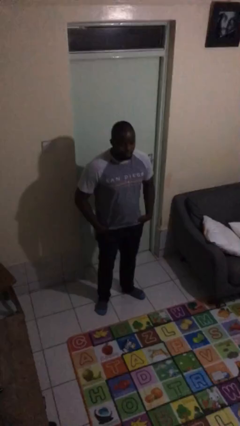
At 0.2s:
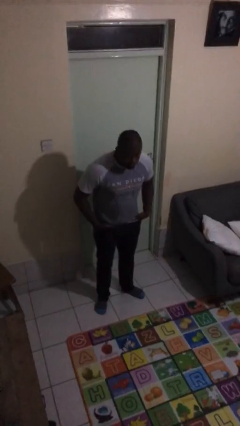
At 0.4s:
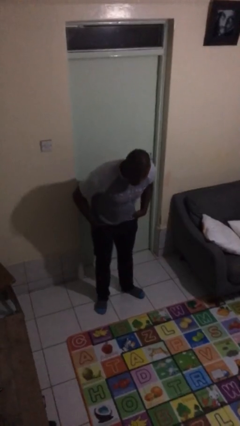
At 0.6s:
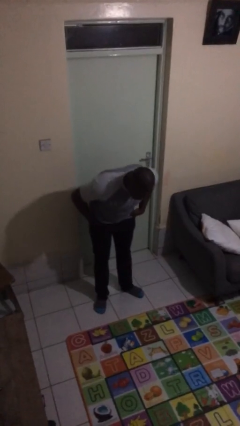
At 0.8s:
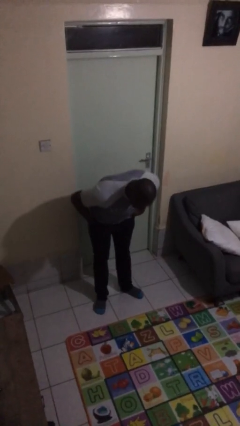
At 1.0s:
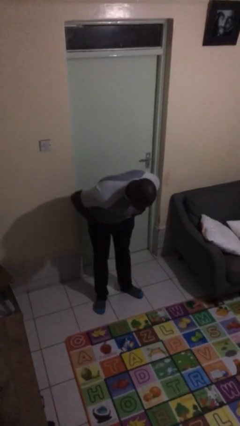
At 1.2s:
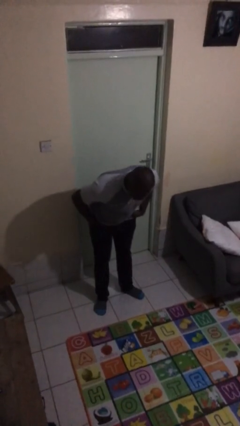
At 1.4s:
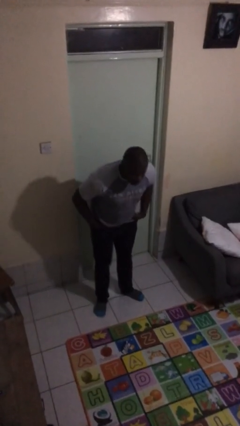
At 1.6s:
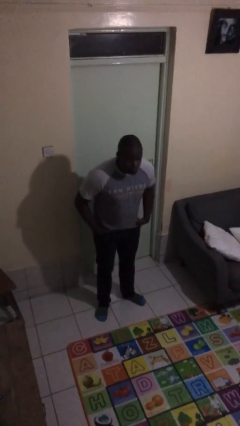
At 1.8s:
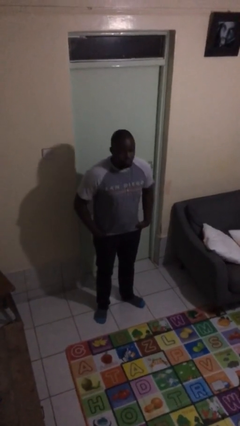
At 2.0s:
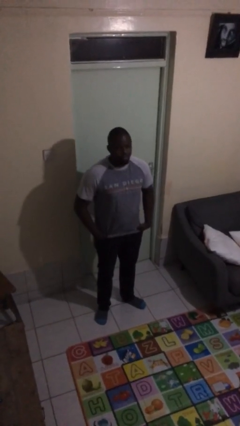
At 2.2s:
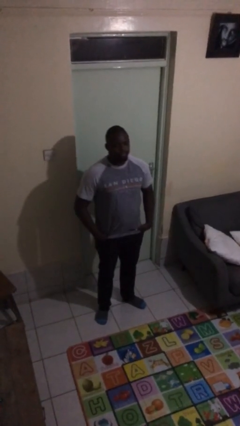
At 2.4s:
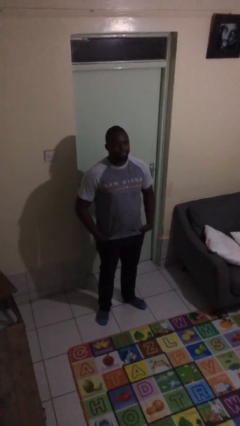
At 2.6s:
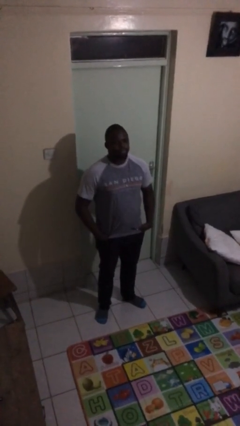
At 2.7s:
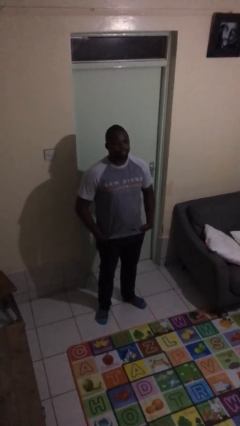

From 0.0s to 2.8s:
person bows

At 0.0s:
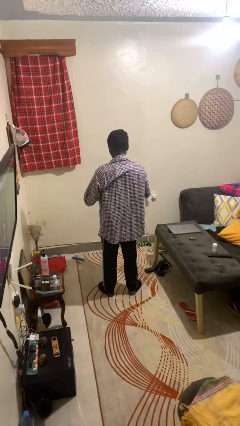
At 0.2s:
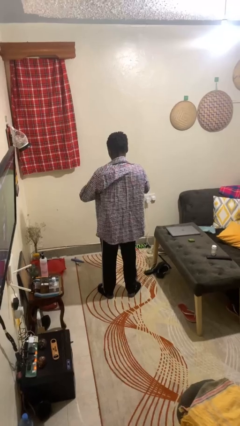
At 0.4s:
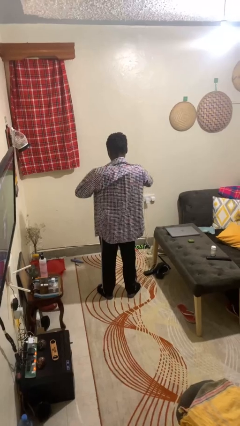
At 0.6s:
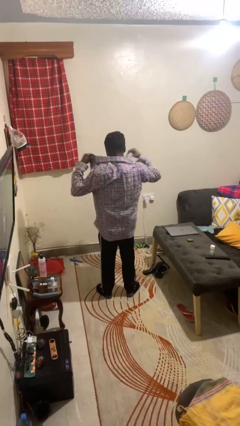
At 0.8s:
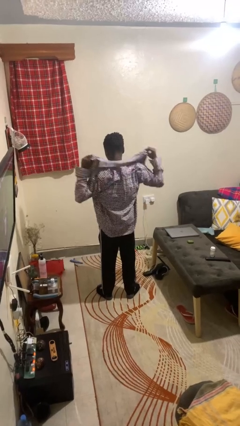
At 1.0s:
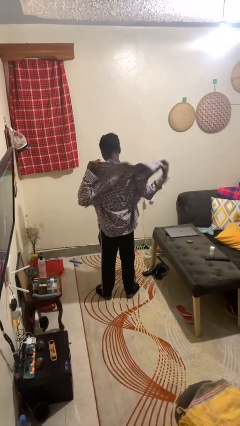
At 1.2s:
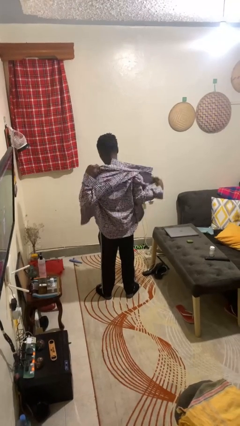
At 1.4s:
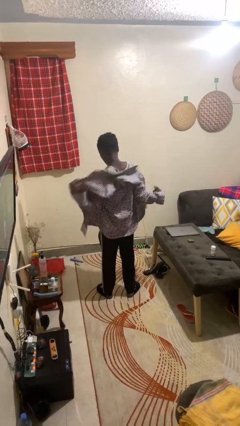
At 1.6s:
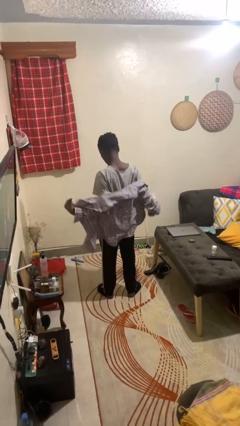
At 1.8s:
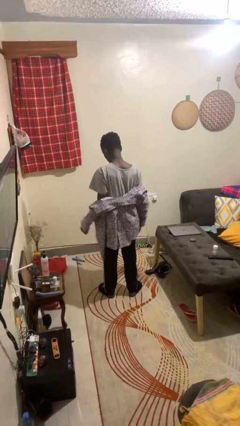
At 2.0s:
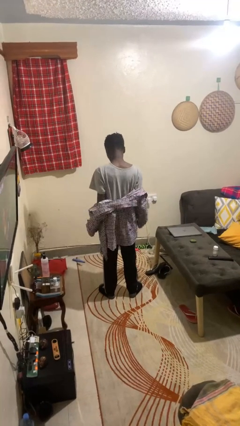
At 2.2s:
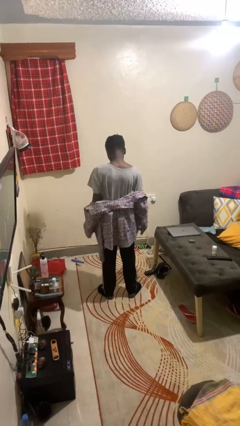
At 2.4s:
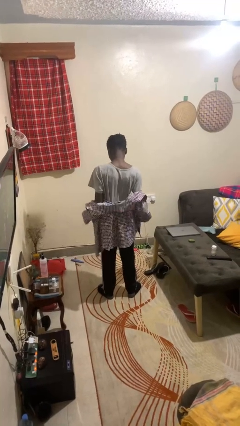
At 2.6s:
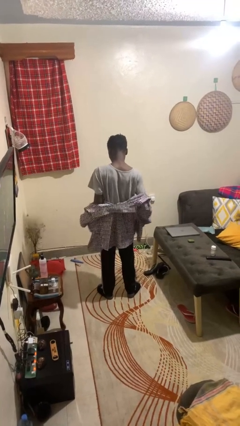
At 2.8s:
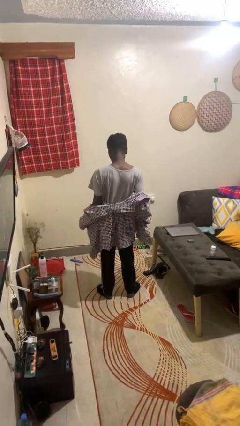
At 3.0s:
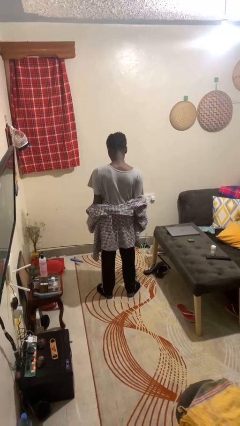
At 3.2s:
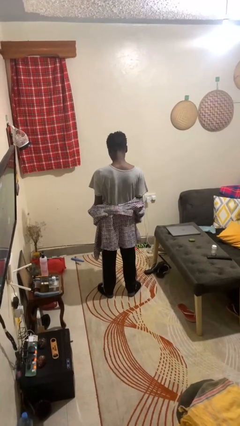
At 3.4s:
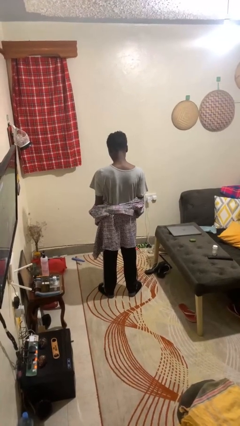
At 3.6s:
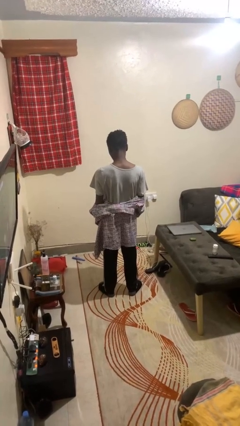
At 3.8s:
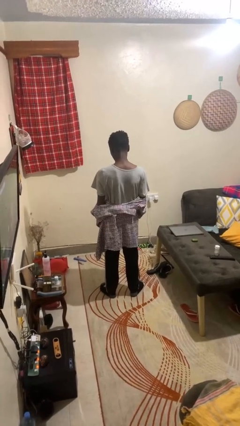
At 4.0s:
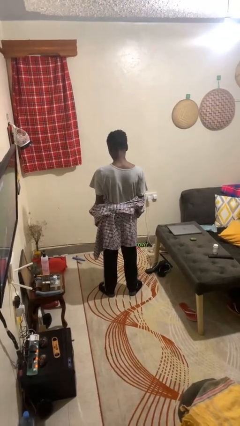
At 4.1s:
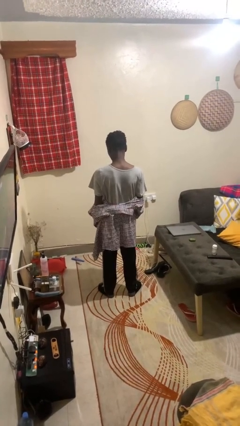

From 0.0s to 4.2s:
person takes off shirt

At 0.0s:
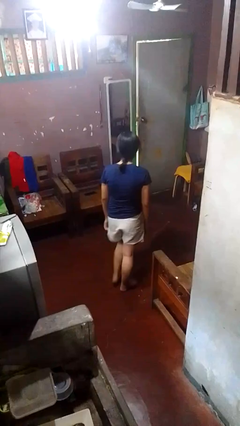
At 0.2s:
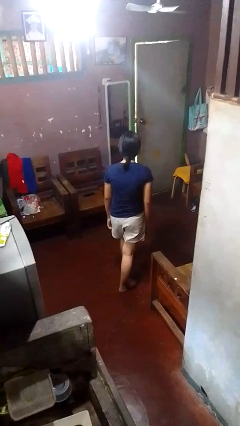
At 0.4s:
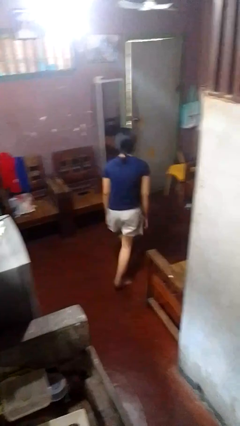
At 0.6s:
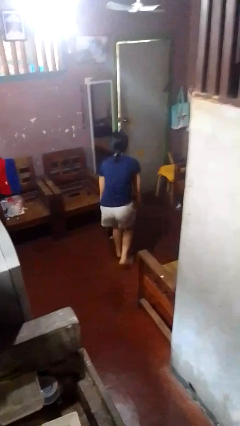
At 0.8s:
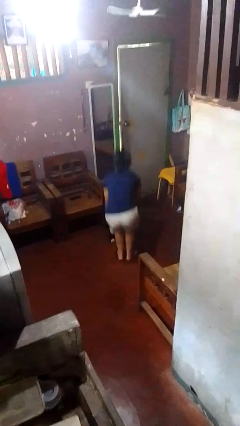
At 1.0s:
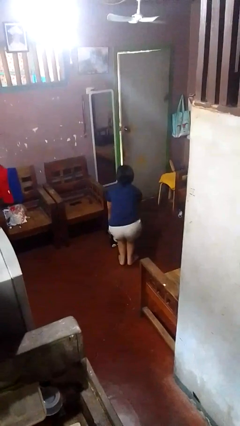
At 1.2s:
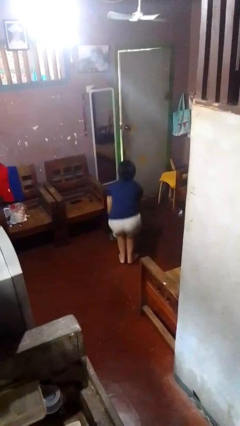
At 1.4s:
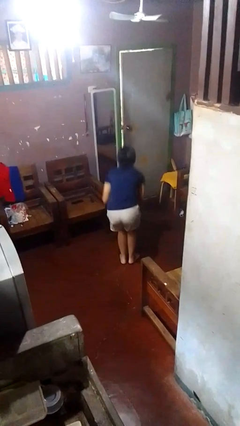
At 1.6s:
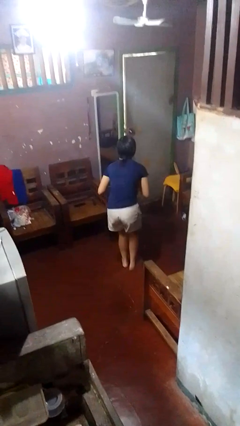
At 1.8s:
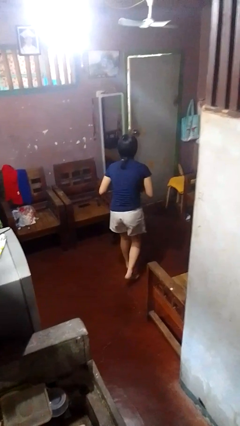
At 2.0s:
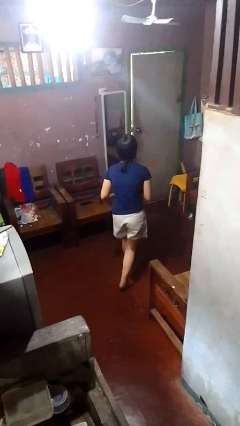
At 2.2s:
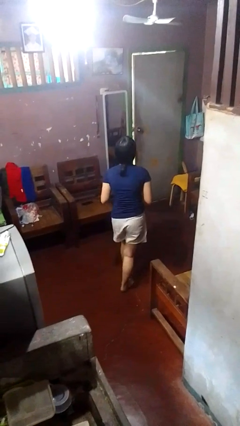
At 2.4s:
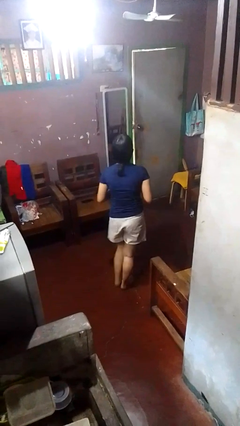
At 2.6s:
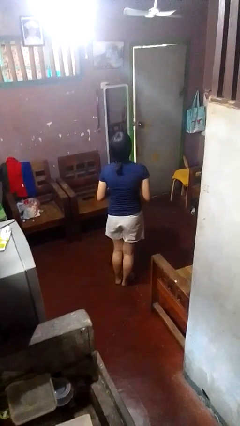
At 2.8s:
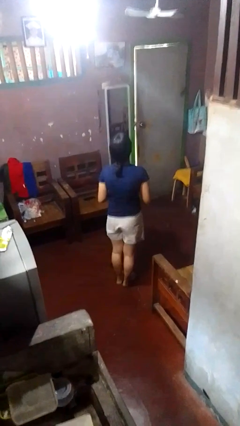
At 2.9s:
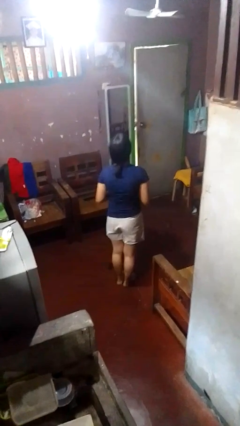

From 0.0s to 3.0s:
person picks up object from floor

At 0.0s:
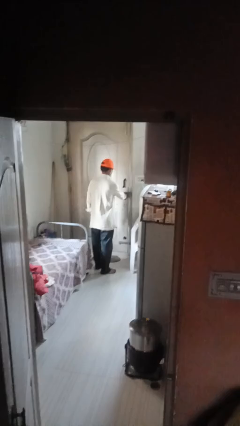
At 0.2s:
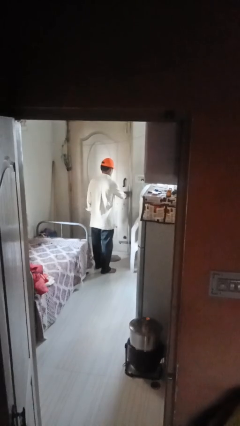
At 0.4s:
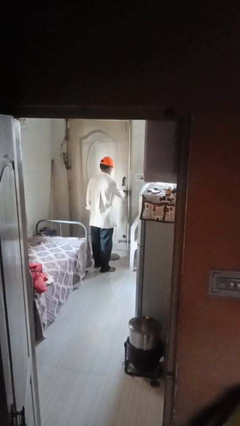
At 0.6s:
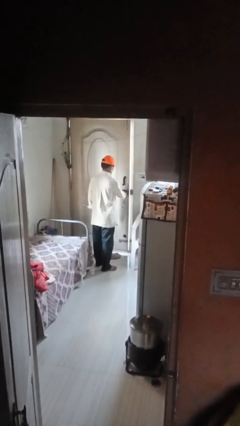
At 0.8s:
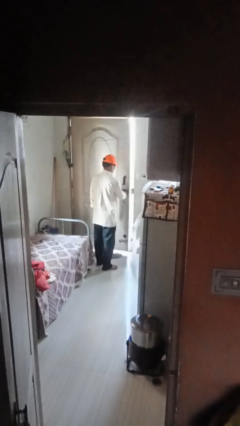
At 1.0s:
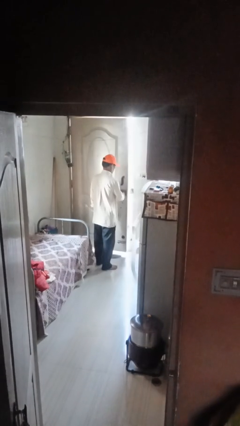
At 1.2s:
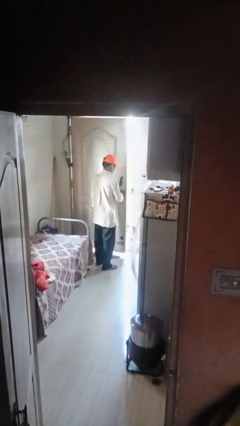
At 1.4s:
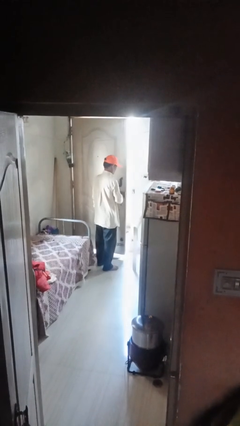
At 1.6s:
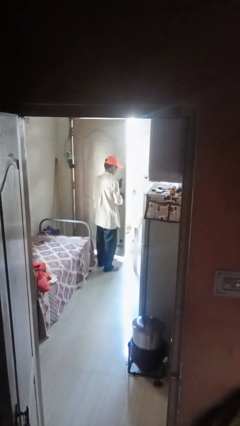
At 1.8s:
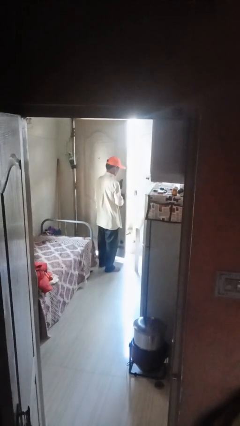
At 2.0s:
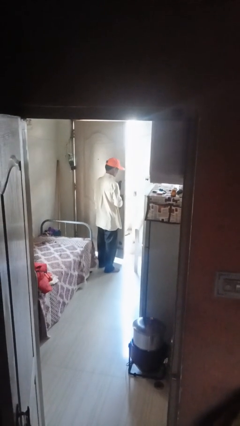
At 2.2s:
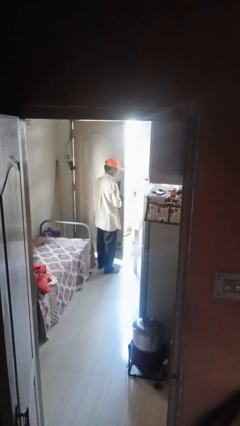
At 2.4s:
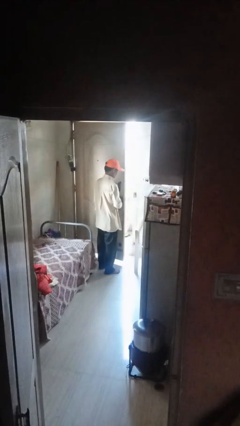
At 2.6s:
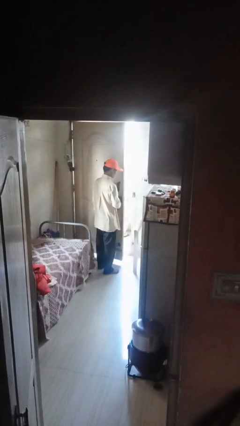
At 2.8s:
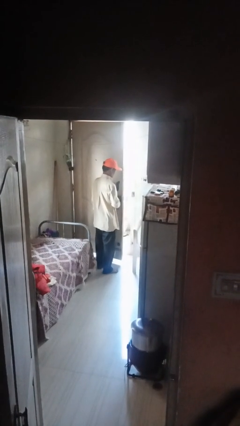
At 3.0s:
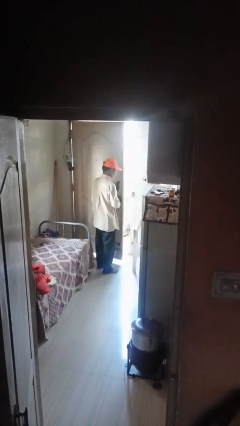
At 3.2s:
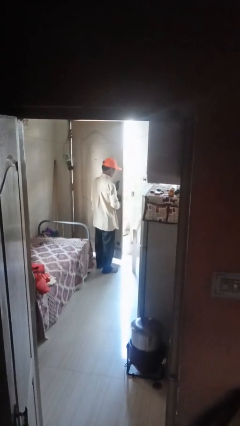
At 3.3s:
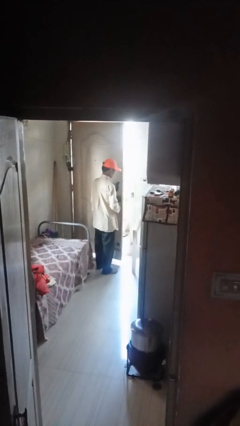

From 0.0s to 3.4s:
person opens facility door

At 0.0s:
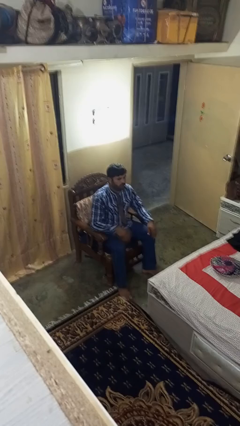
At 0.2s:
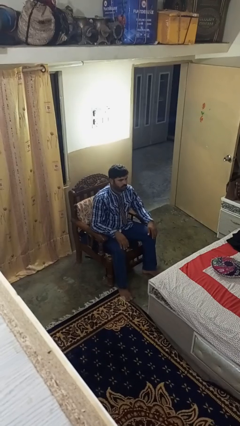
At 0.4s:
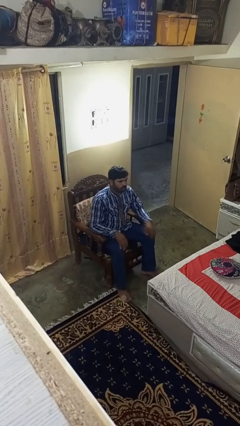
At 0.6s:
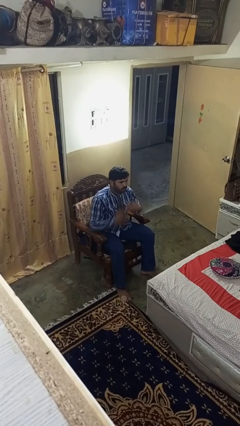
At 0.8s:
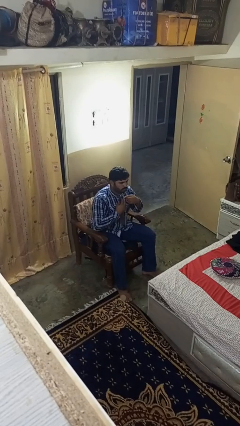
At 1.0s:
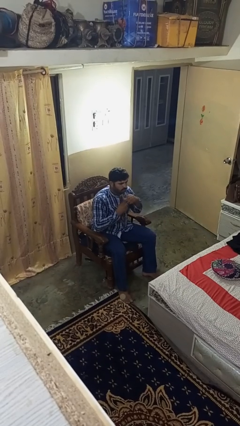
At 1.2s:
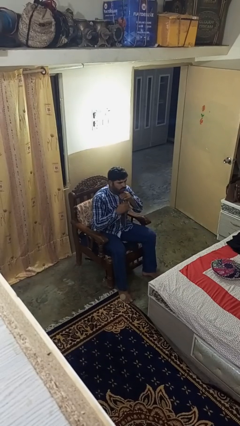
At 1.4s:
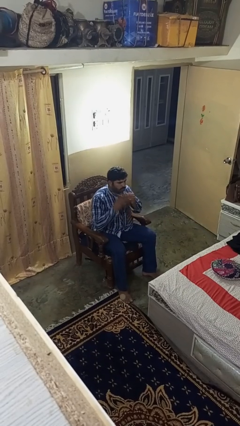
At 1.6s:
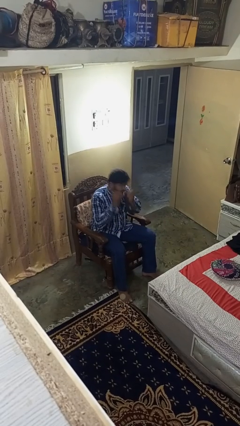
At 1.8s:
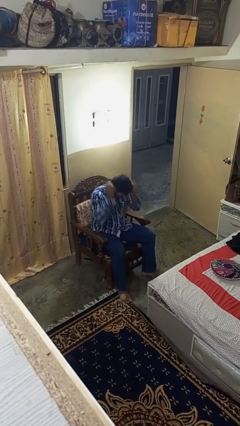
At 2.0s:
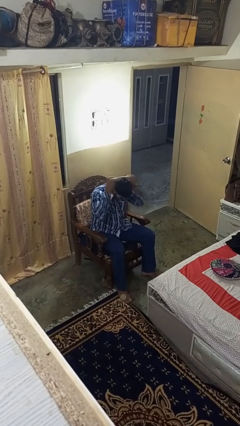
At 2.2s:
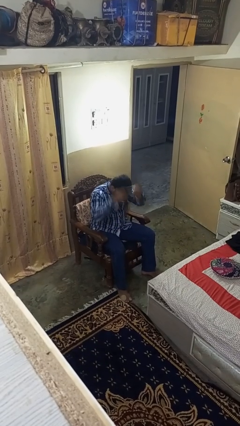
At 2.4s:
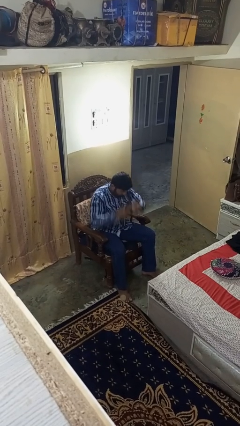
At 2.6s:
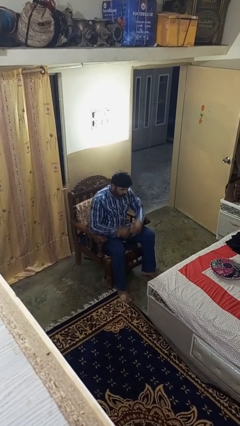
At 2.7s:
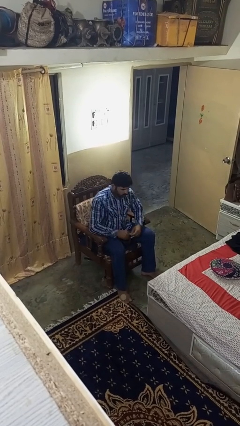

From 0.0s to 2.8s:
person takes off necktie

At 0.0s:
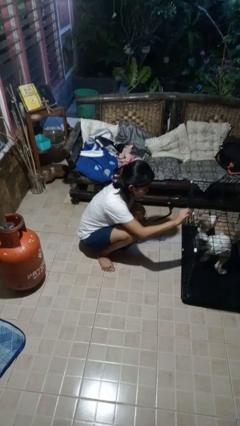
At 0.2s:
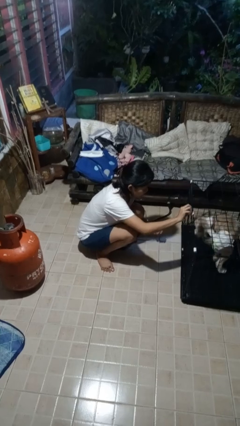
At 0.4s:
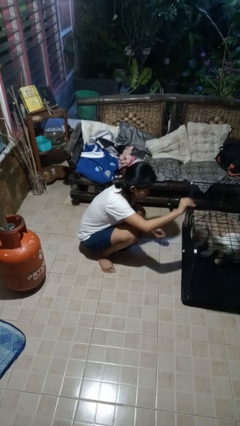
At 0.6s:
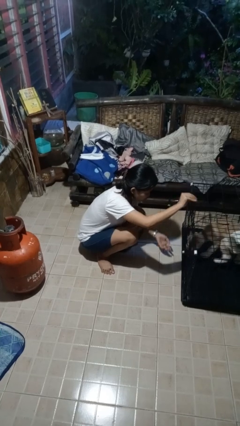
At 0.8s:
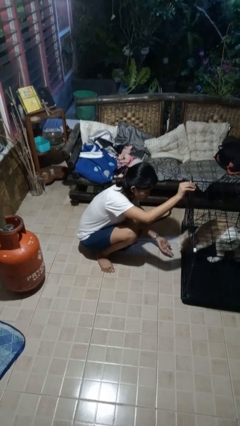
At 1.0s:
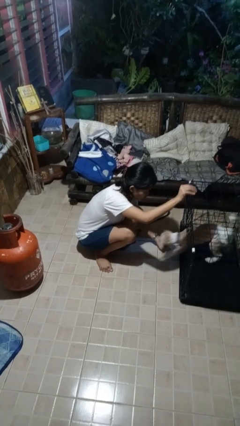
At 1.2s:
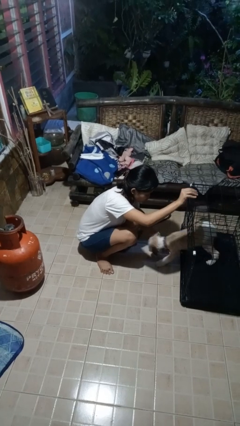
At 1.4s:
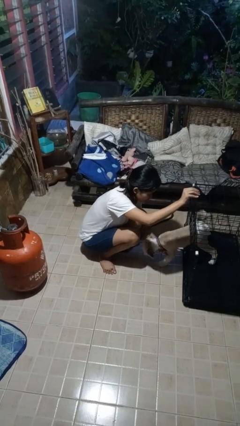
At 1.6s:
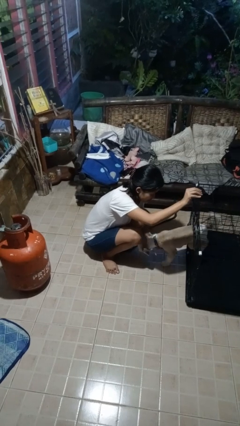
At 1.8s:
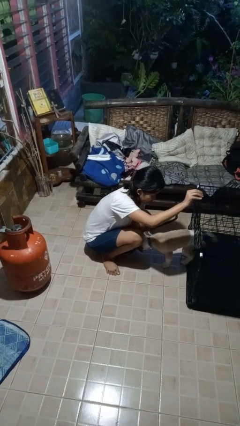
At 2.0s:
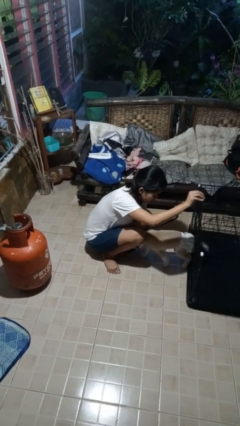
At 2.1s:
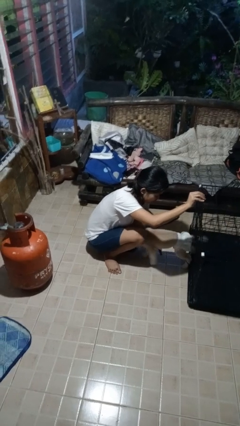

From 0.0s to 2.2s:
person uncrates dog
